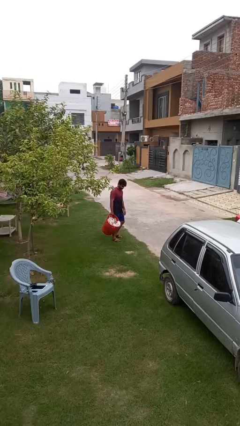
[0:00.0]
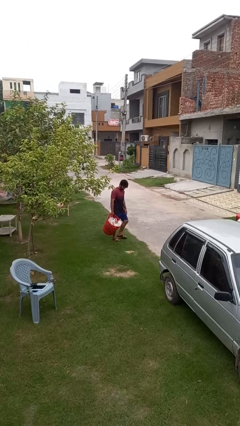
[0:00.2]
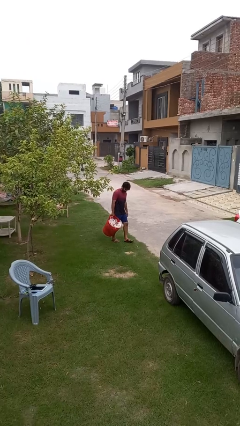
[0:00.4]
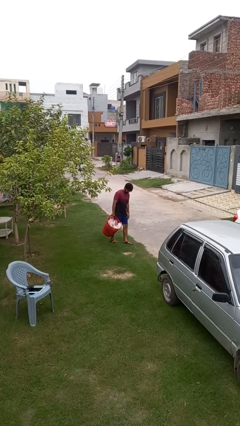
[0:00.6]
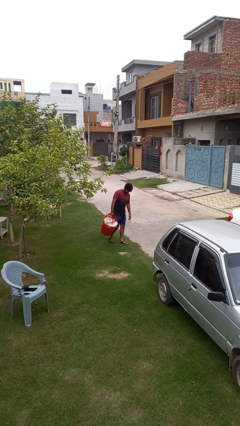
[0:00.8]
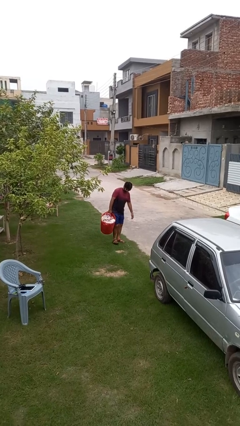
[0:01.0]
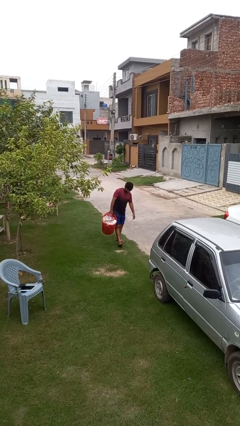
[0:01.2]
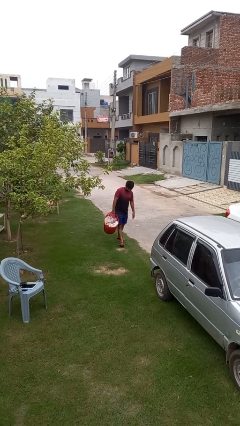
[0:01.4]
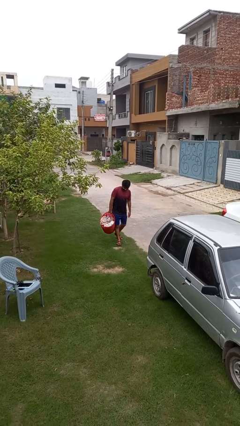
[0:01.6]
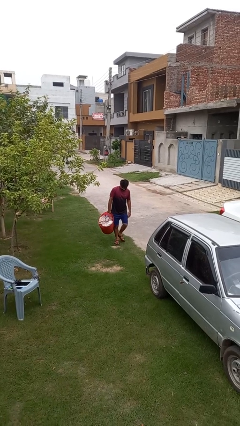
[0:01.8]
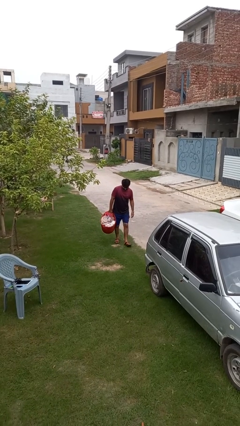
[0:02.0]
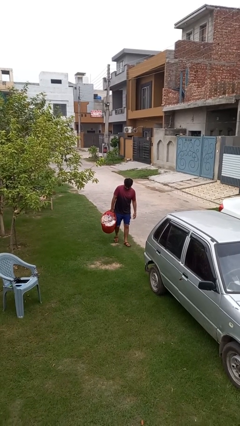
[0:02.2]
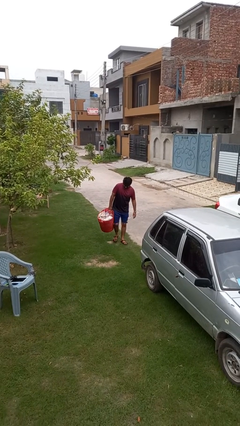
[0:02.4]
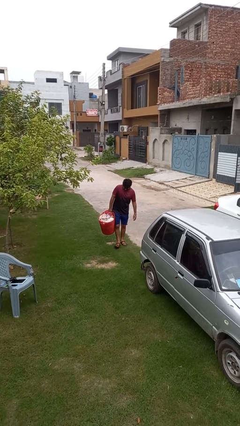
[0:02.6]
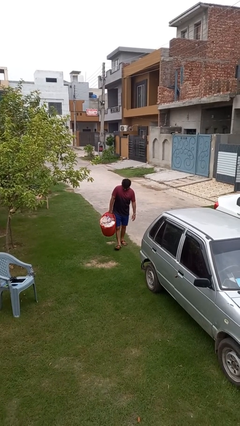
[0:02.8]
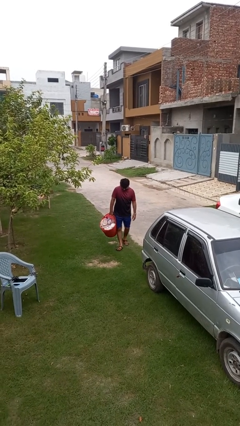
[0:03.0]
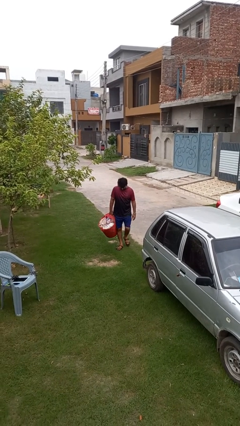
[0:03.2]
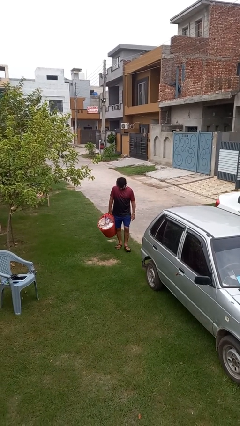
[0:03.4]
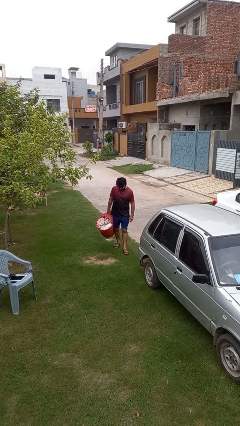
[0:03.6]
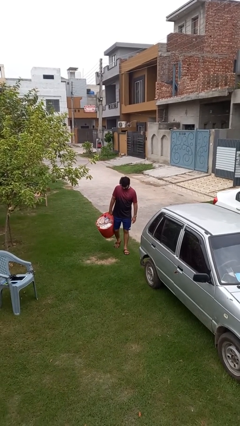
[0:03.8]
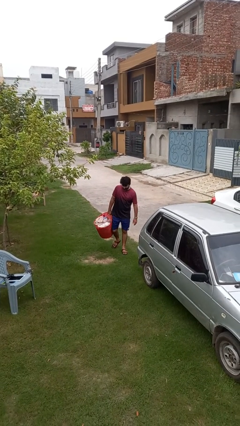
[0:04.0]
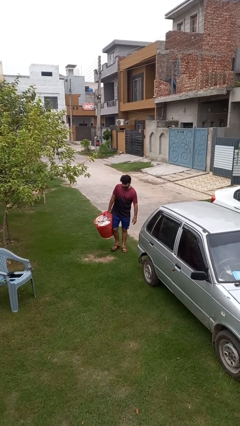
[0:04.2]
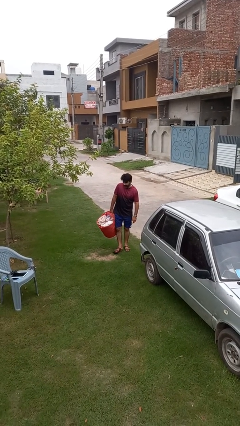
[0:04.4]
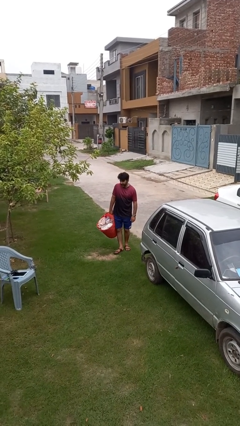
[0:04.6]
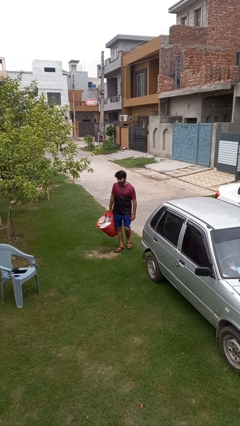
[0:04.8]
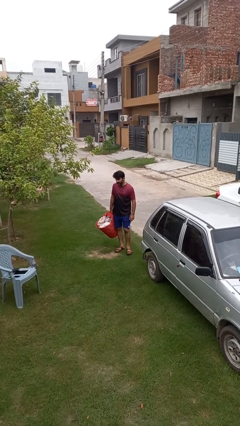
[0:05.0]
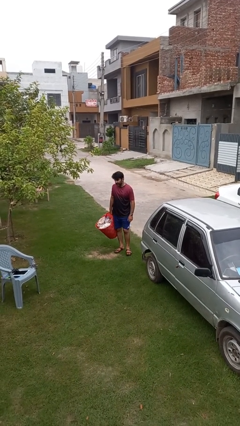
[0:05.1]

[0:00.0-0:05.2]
person carries laundry basket

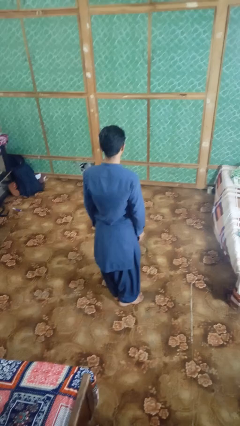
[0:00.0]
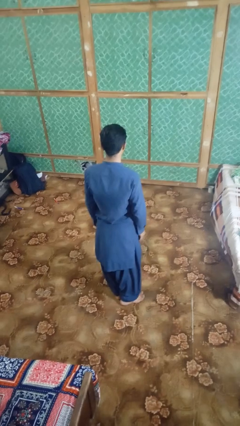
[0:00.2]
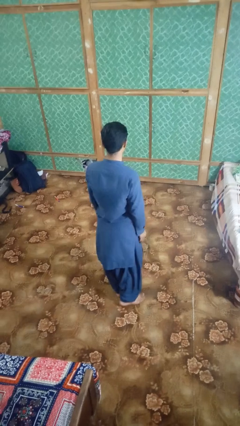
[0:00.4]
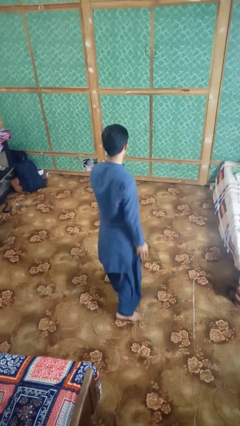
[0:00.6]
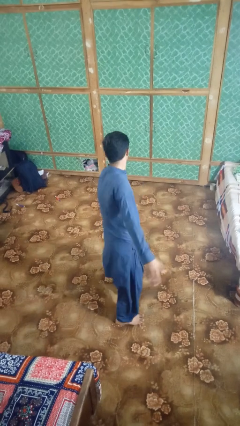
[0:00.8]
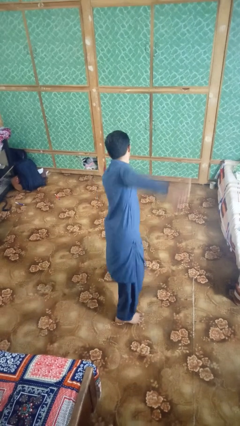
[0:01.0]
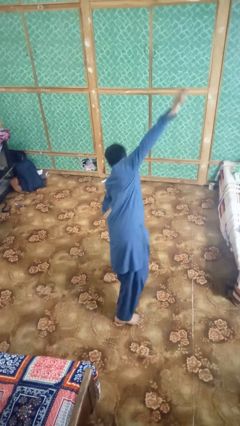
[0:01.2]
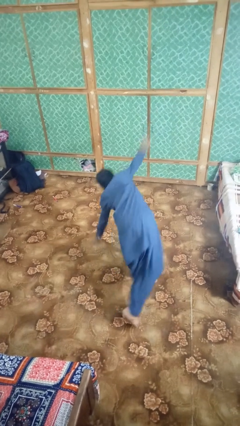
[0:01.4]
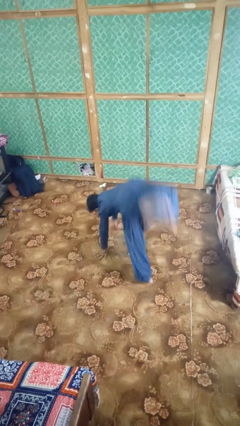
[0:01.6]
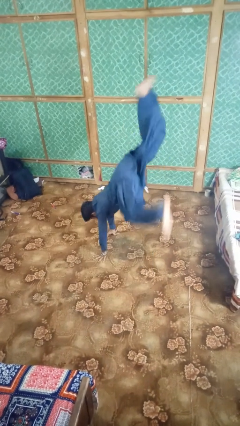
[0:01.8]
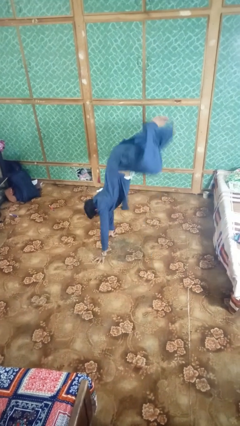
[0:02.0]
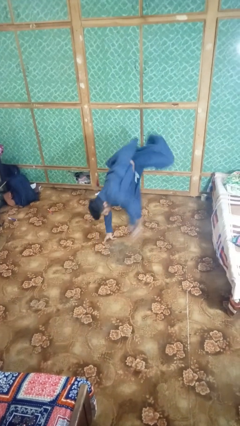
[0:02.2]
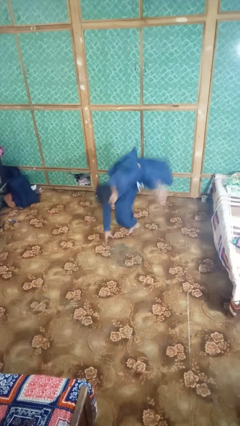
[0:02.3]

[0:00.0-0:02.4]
person somersaults

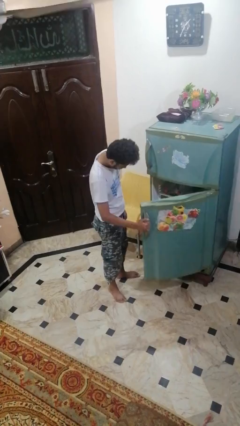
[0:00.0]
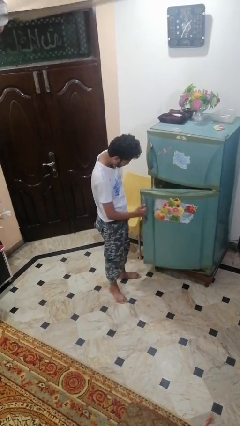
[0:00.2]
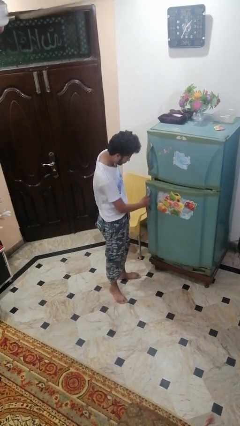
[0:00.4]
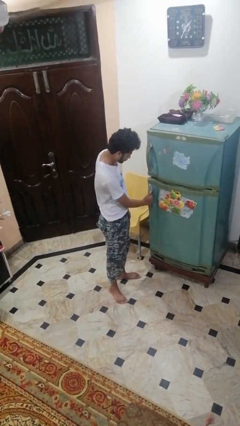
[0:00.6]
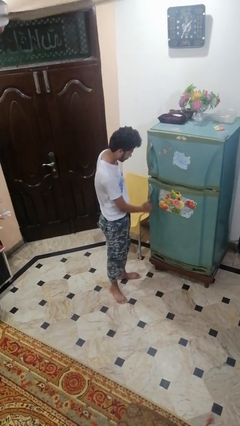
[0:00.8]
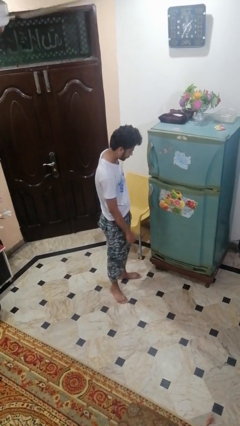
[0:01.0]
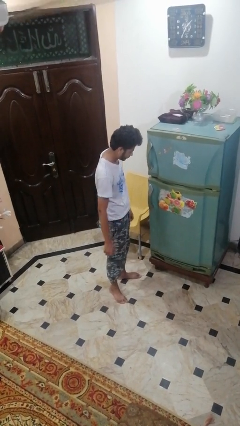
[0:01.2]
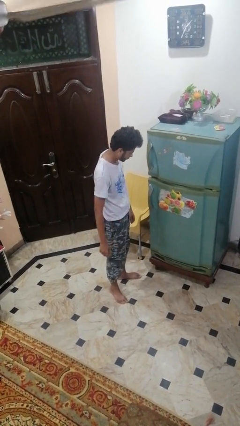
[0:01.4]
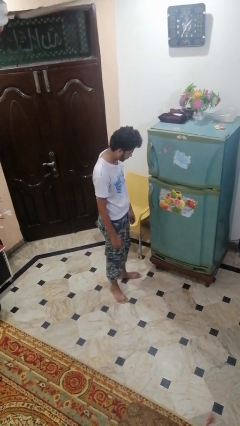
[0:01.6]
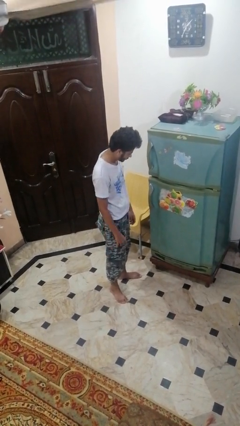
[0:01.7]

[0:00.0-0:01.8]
person closes refrigerator

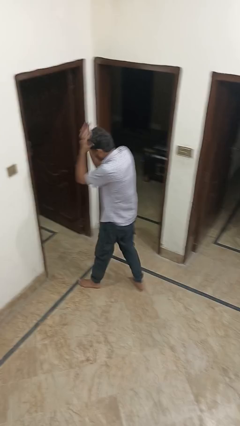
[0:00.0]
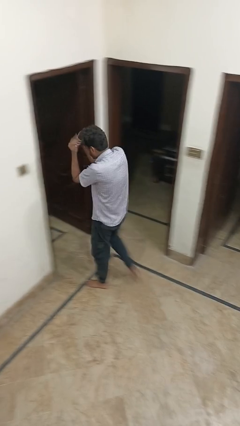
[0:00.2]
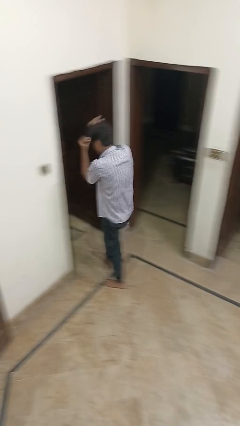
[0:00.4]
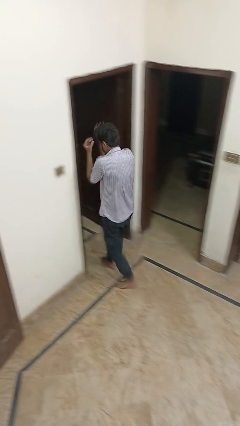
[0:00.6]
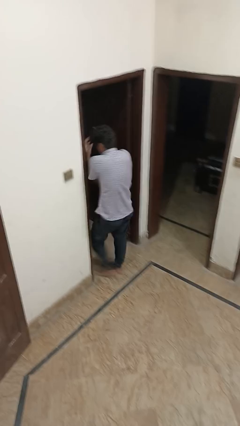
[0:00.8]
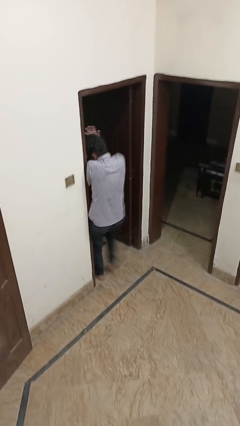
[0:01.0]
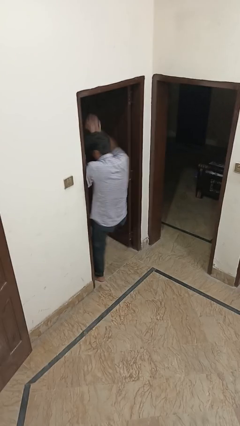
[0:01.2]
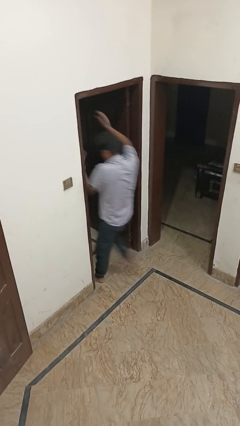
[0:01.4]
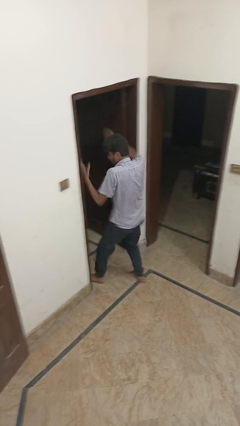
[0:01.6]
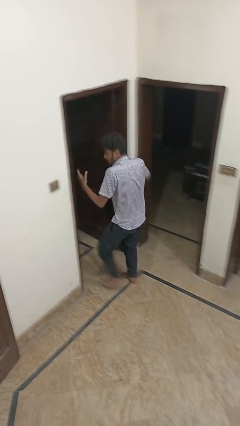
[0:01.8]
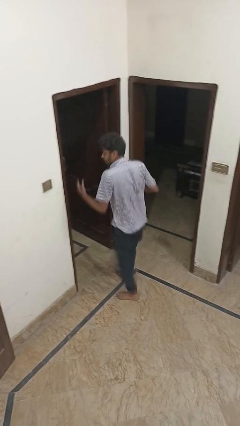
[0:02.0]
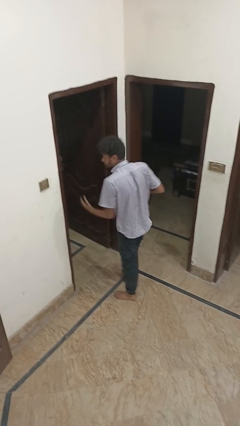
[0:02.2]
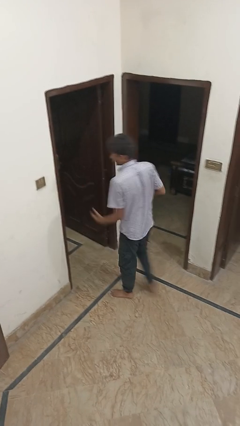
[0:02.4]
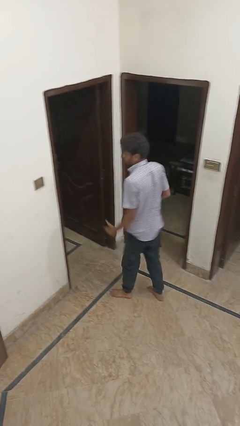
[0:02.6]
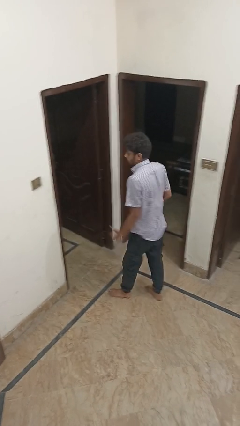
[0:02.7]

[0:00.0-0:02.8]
person bumps into wall

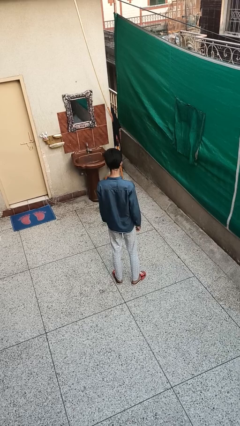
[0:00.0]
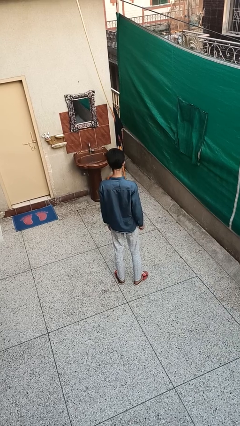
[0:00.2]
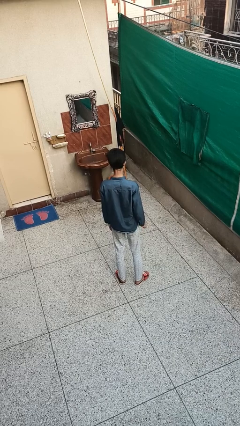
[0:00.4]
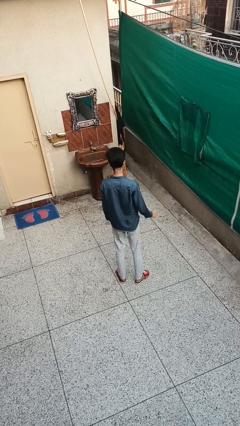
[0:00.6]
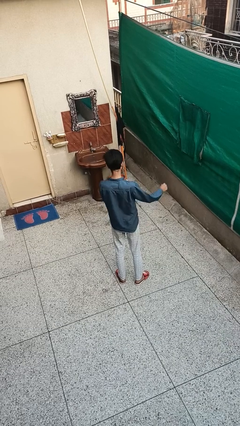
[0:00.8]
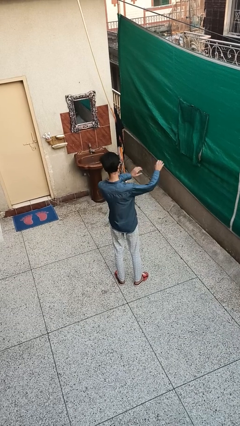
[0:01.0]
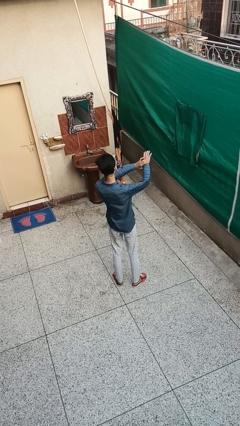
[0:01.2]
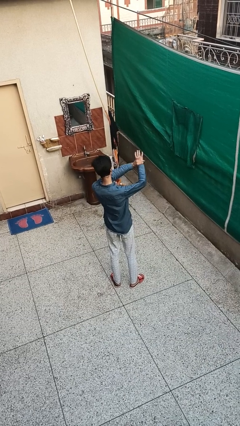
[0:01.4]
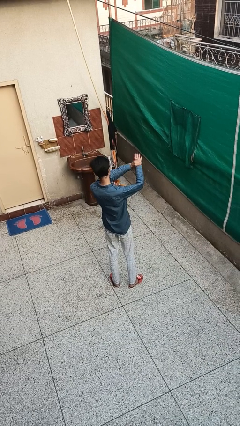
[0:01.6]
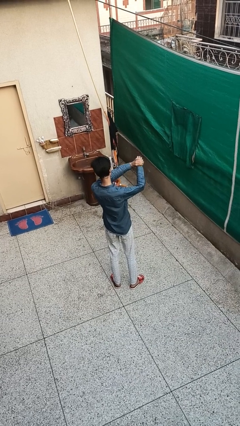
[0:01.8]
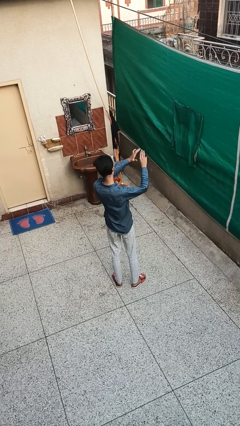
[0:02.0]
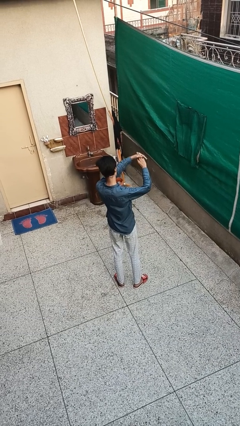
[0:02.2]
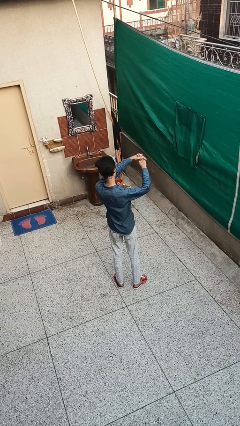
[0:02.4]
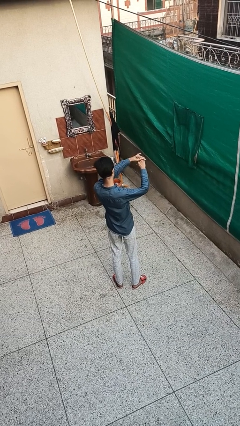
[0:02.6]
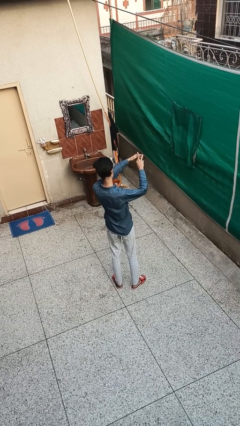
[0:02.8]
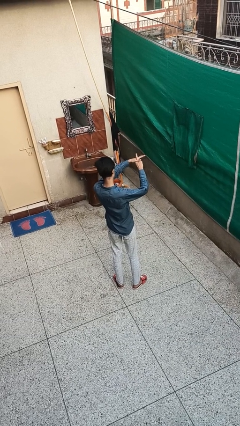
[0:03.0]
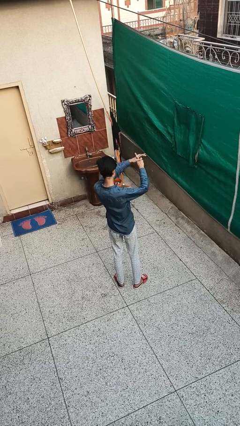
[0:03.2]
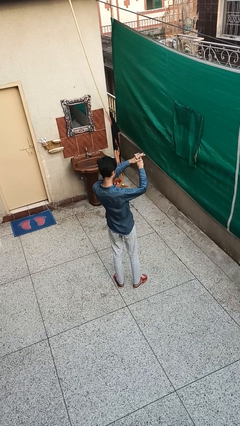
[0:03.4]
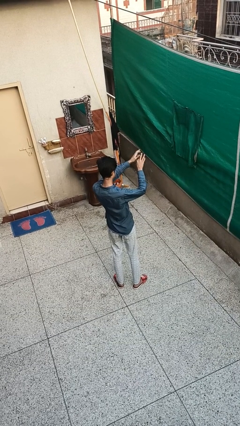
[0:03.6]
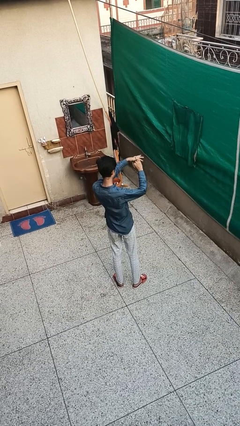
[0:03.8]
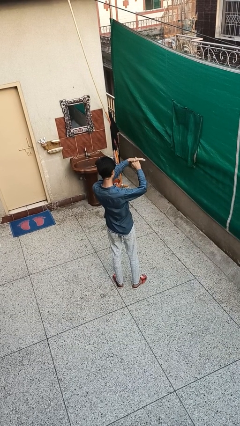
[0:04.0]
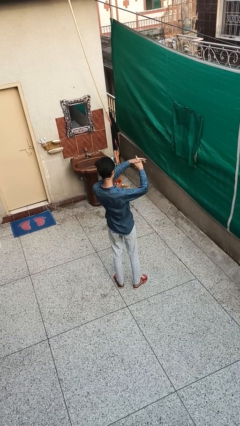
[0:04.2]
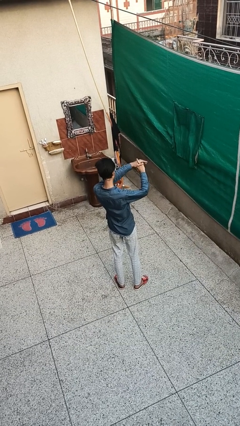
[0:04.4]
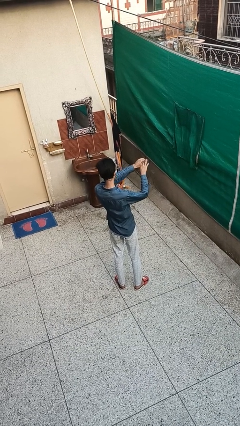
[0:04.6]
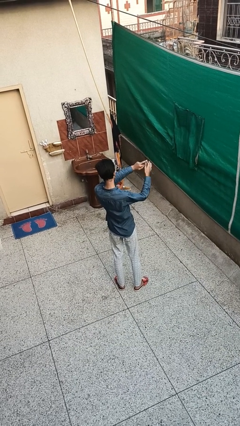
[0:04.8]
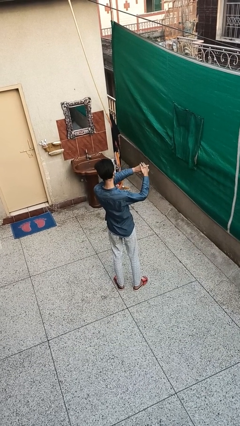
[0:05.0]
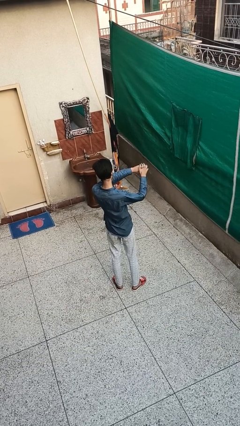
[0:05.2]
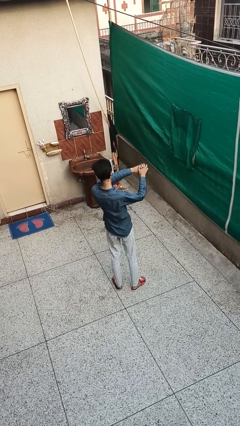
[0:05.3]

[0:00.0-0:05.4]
person cracks knuckles
